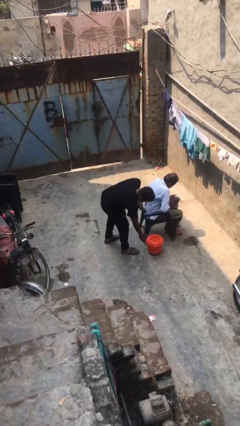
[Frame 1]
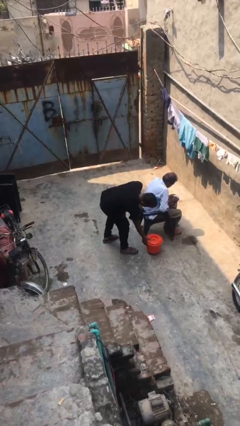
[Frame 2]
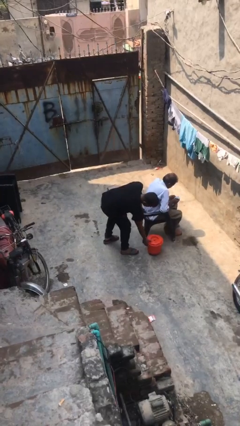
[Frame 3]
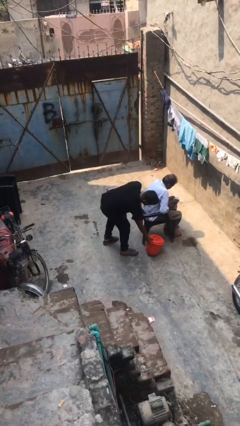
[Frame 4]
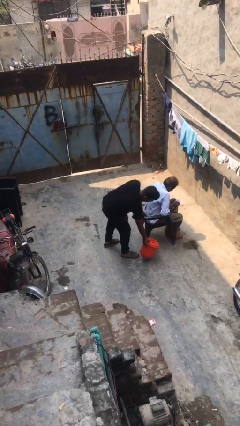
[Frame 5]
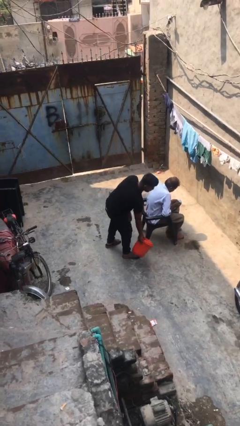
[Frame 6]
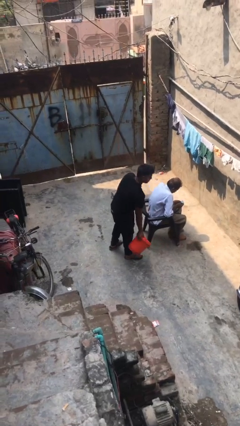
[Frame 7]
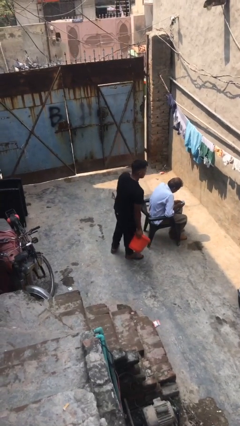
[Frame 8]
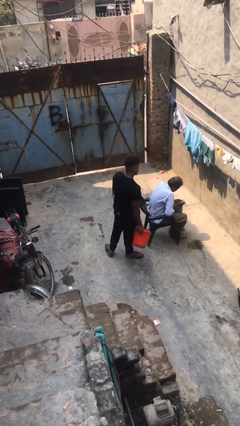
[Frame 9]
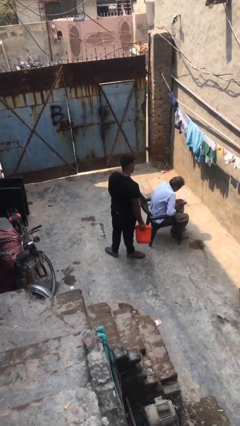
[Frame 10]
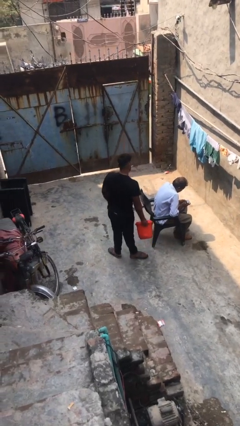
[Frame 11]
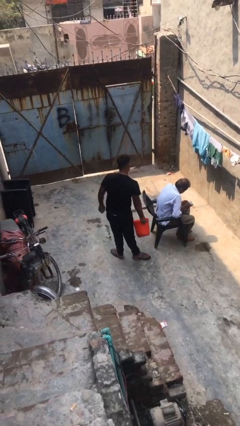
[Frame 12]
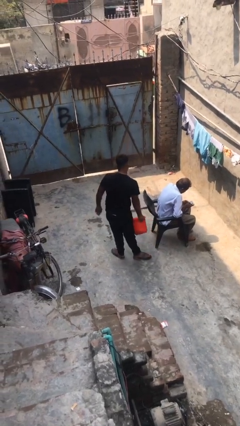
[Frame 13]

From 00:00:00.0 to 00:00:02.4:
person steals object from person

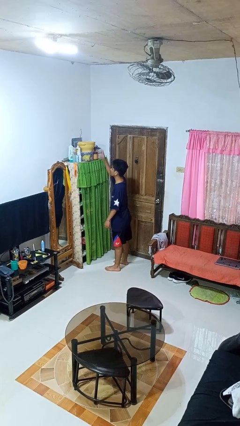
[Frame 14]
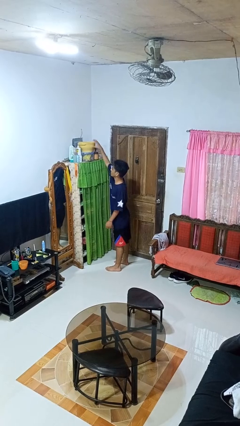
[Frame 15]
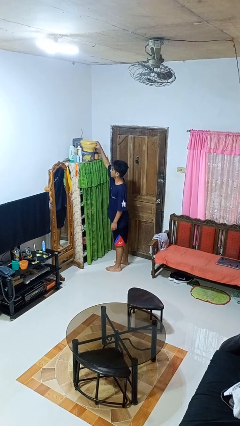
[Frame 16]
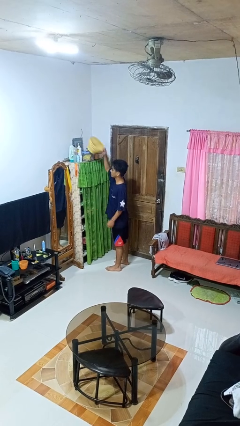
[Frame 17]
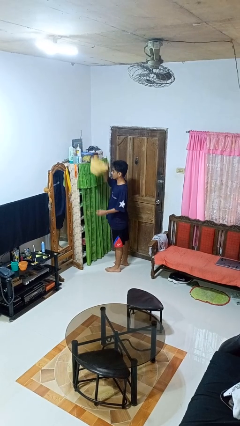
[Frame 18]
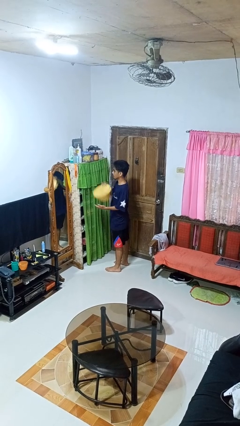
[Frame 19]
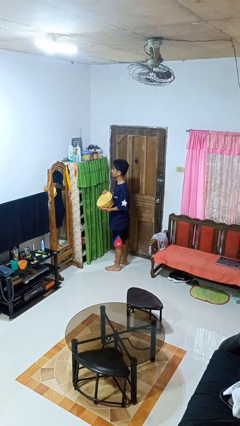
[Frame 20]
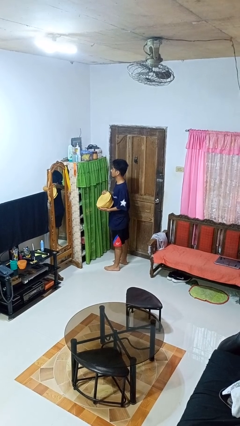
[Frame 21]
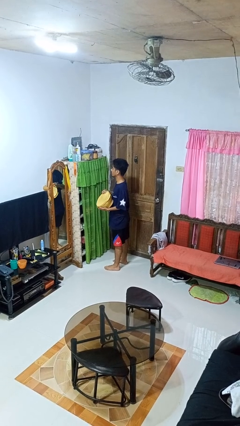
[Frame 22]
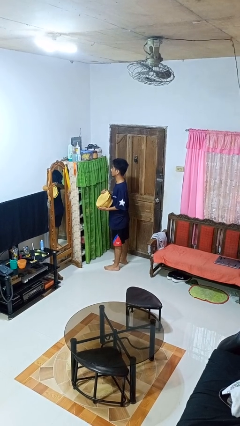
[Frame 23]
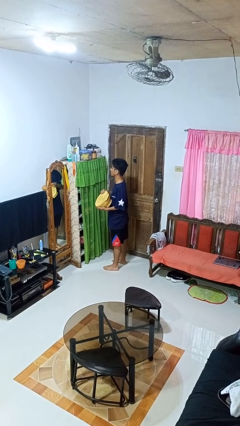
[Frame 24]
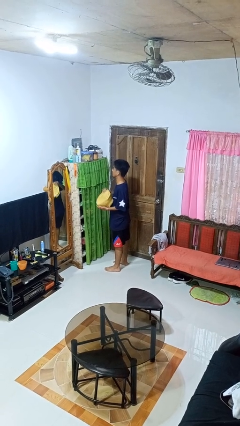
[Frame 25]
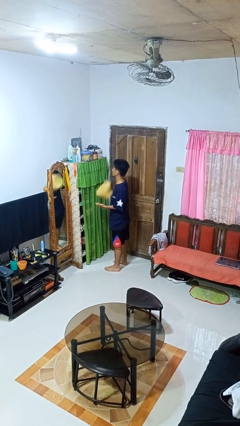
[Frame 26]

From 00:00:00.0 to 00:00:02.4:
person picks up object from shelf

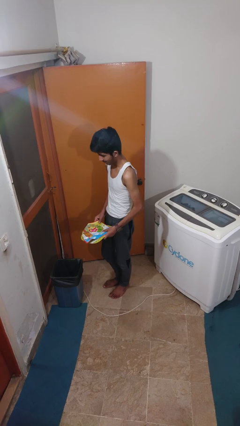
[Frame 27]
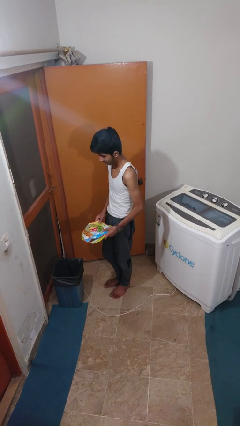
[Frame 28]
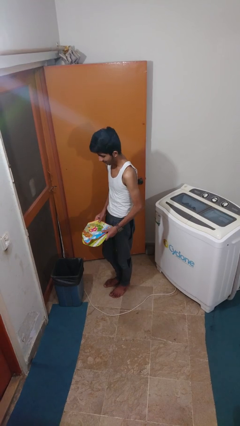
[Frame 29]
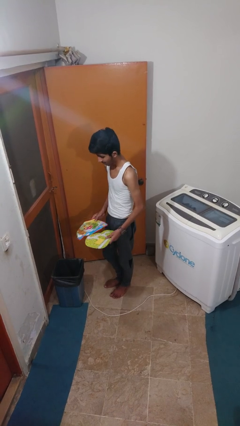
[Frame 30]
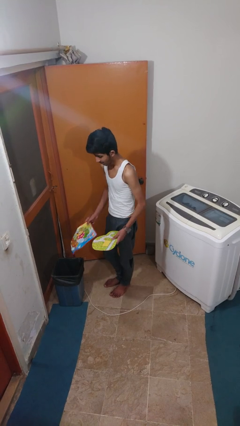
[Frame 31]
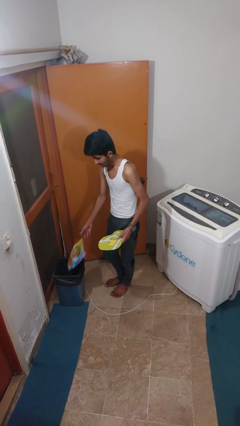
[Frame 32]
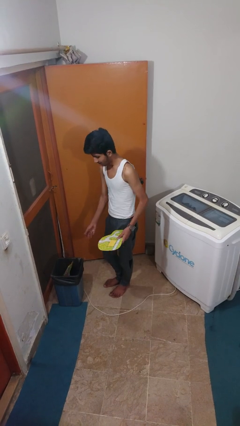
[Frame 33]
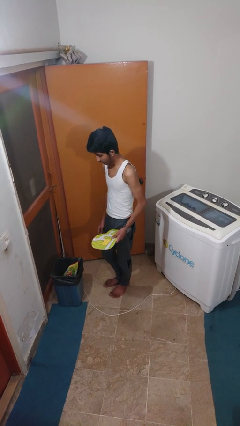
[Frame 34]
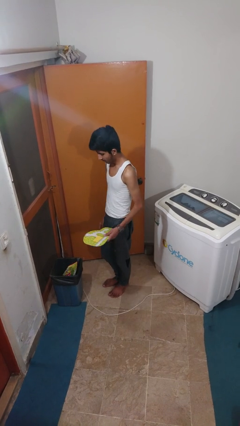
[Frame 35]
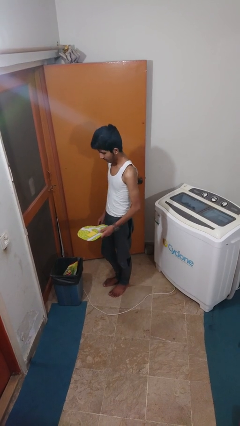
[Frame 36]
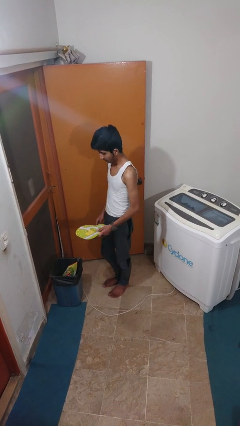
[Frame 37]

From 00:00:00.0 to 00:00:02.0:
person discards trash

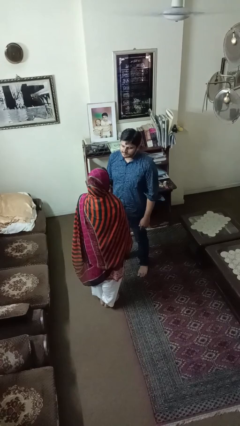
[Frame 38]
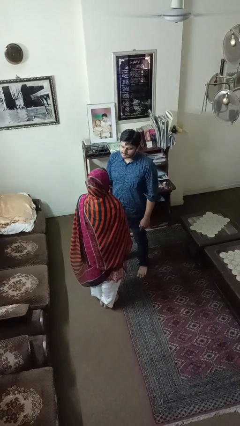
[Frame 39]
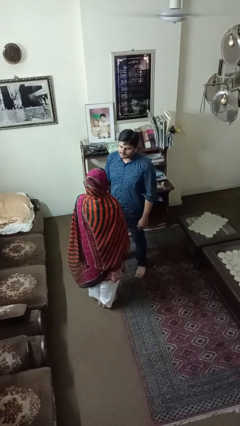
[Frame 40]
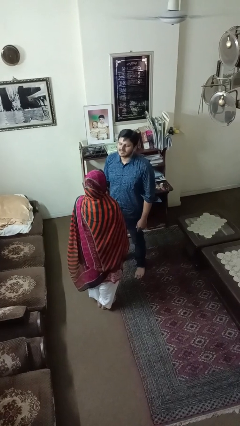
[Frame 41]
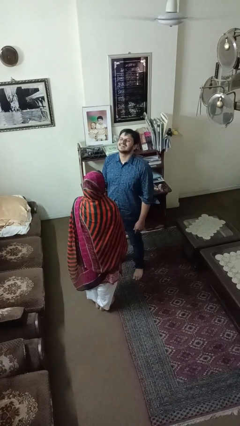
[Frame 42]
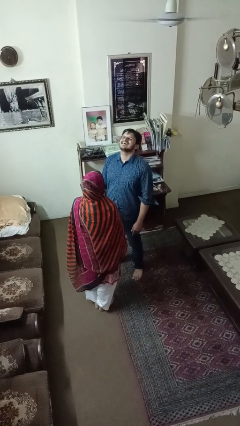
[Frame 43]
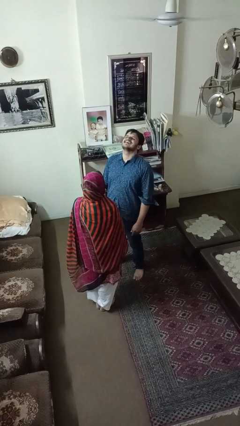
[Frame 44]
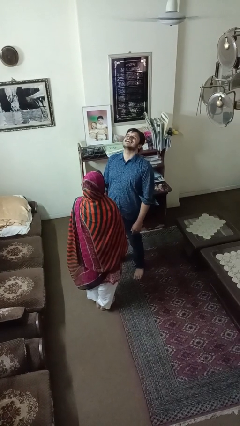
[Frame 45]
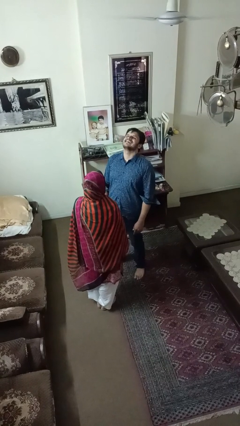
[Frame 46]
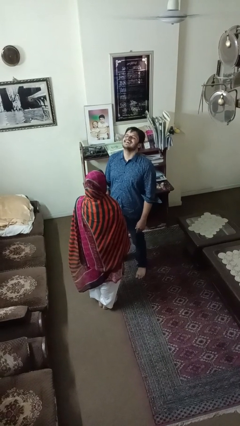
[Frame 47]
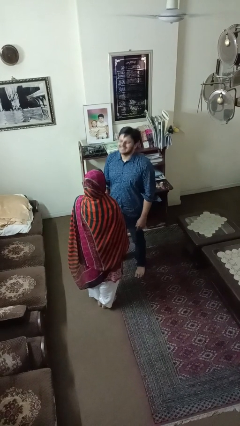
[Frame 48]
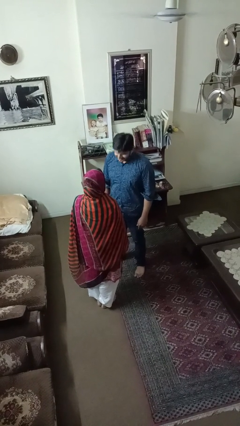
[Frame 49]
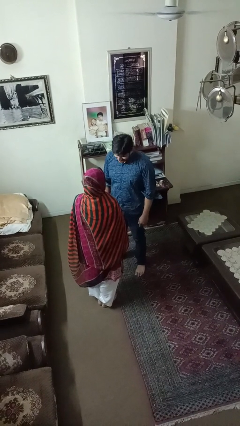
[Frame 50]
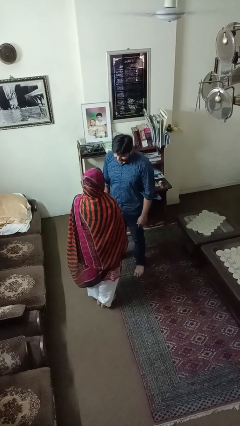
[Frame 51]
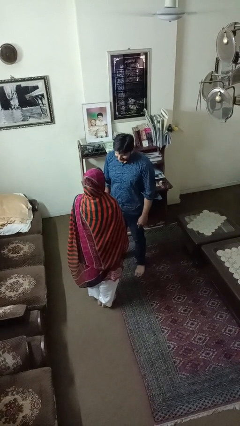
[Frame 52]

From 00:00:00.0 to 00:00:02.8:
person laughs with person

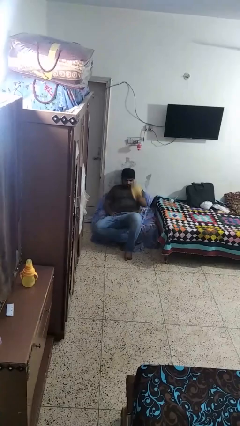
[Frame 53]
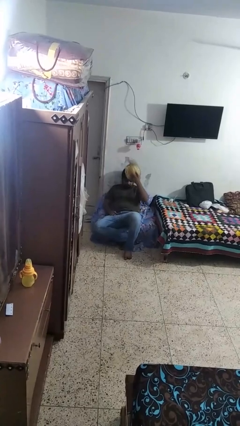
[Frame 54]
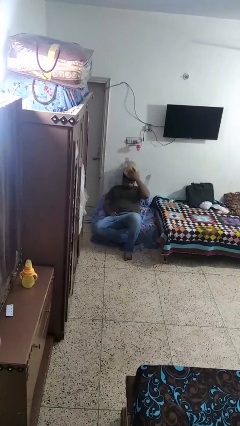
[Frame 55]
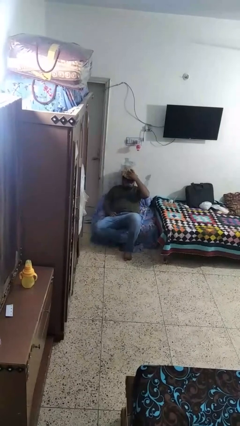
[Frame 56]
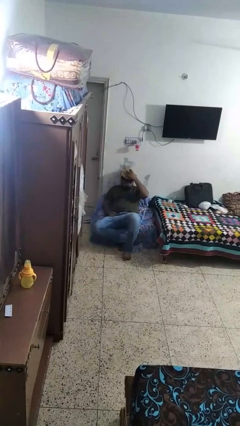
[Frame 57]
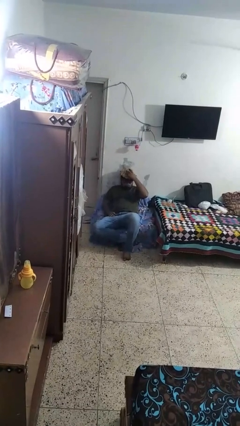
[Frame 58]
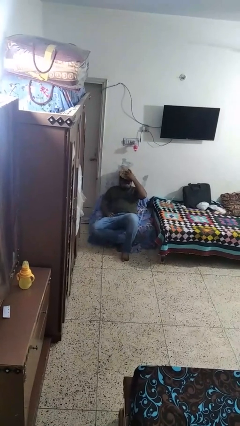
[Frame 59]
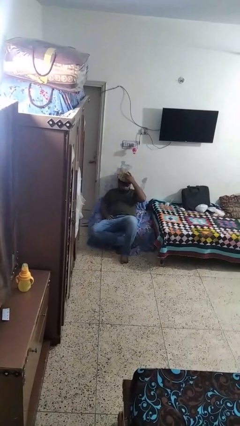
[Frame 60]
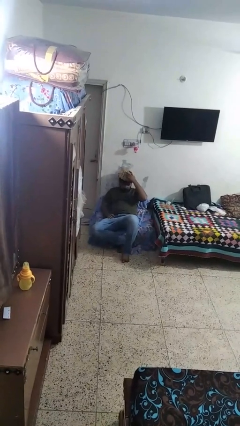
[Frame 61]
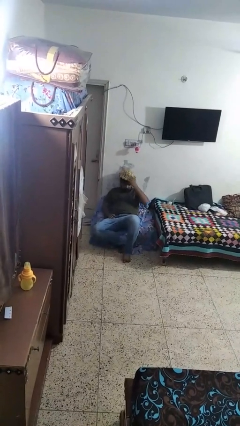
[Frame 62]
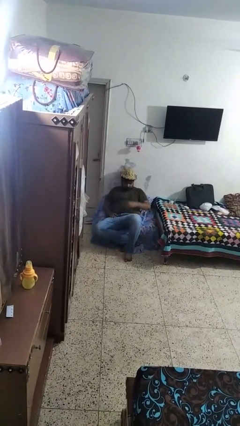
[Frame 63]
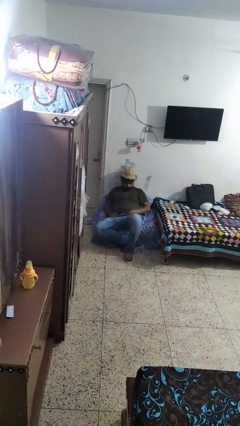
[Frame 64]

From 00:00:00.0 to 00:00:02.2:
person puts on hat

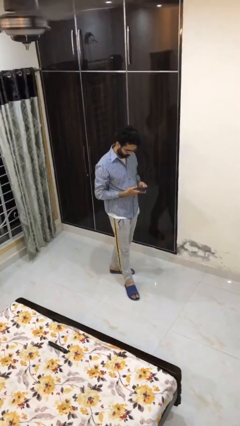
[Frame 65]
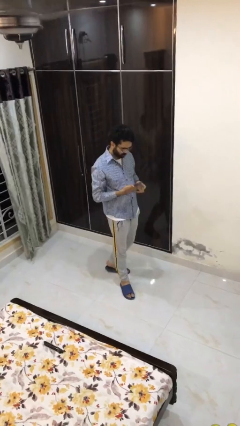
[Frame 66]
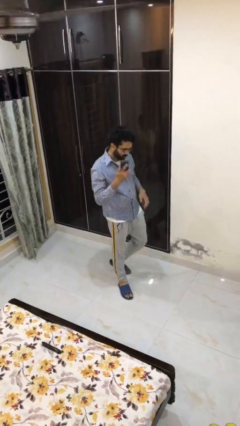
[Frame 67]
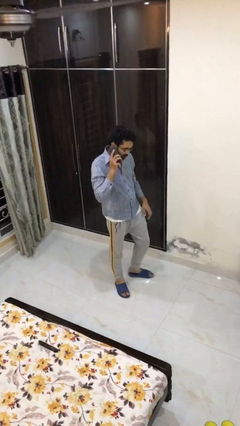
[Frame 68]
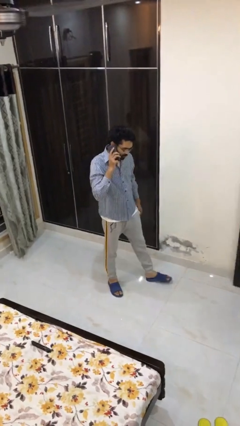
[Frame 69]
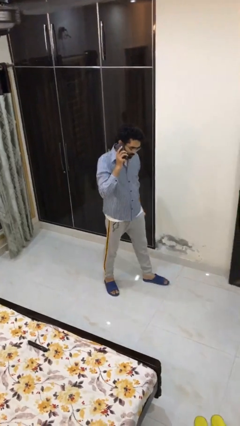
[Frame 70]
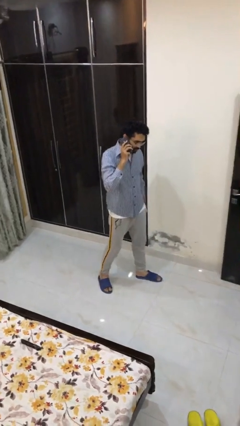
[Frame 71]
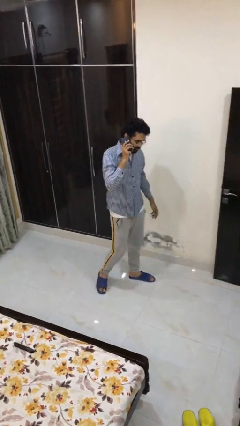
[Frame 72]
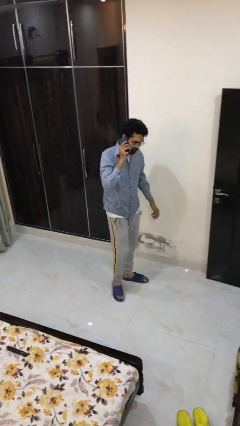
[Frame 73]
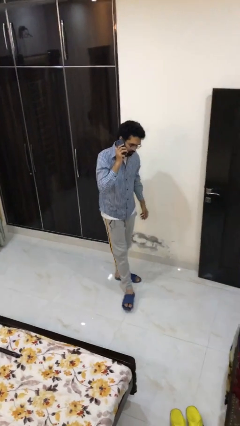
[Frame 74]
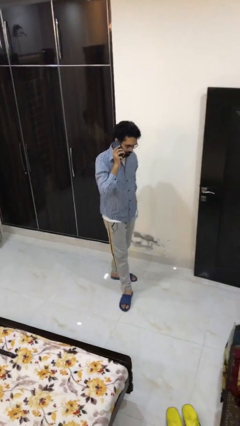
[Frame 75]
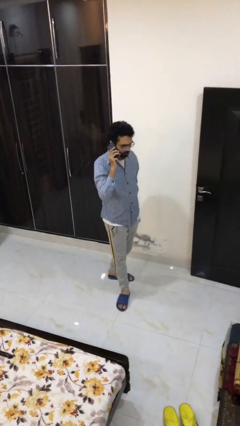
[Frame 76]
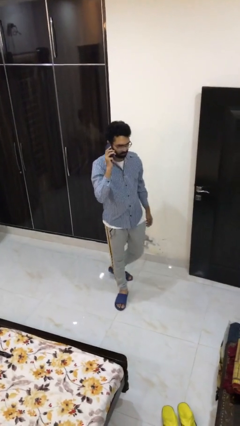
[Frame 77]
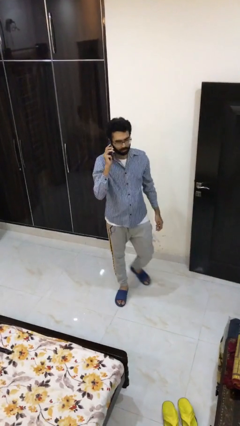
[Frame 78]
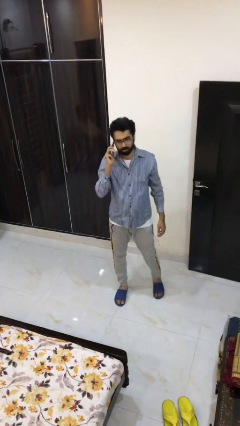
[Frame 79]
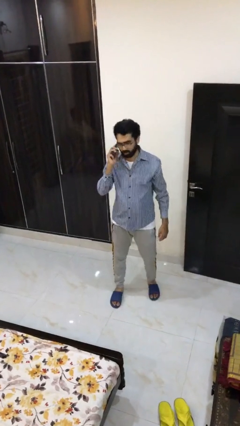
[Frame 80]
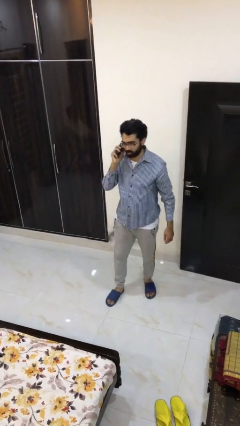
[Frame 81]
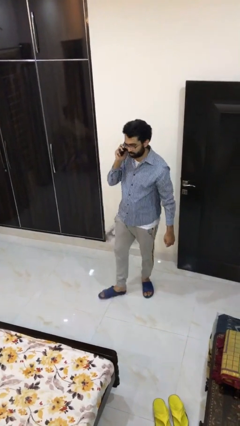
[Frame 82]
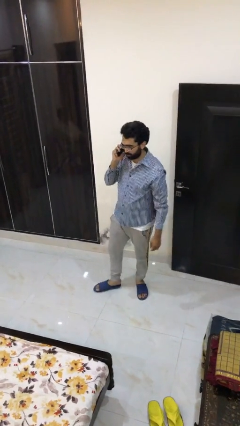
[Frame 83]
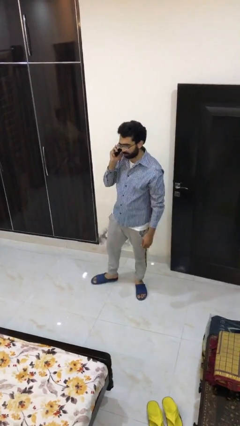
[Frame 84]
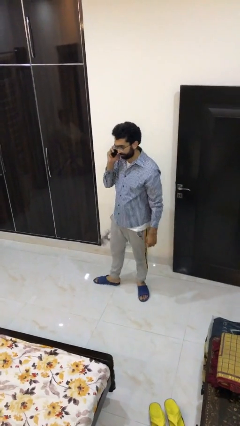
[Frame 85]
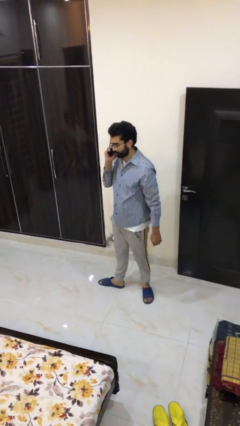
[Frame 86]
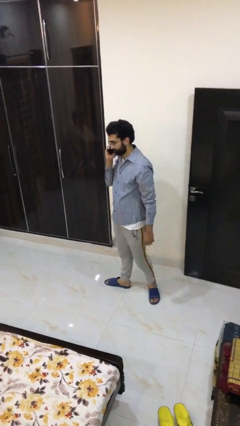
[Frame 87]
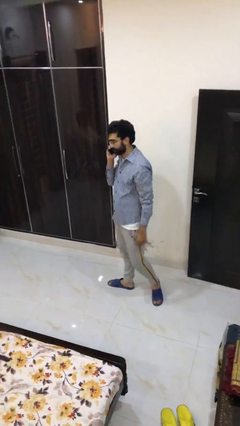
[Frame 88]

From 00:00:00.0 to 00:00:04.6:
person talks on phone

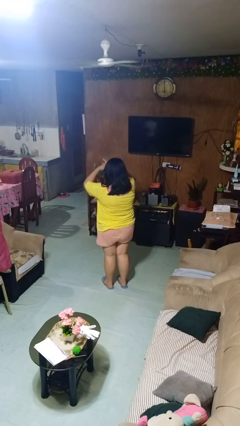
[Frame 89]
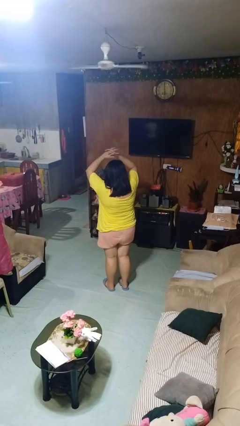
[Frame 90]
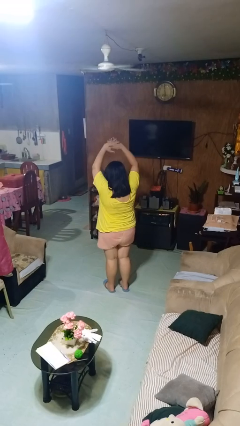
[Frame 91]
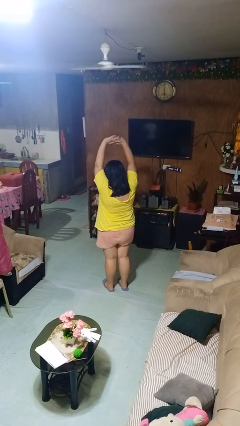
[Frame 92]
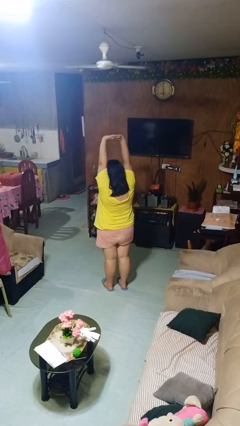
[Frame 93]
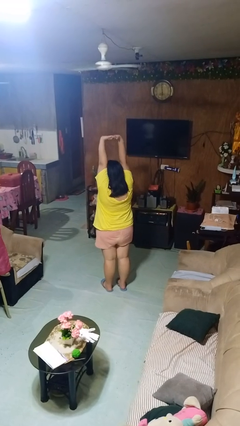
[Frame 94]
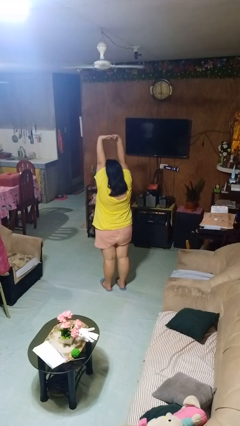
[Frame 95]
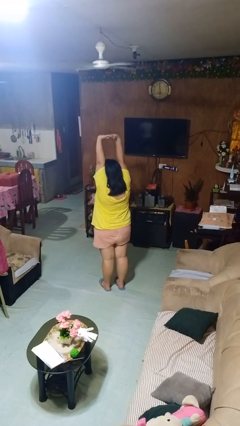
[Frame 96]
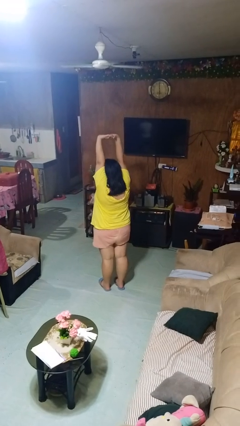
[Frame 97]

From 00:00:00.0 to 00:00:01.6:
person stretches arms over head
